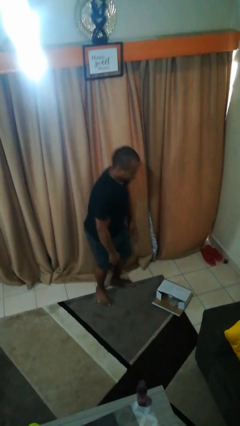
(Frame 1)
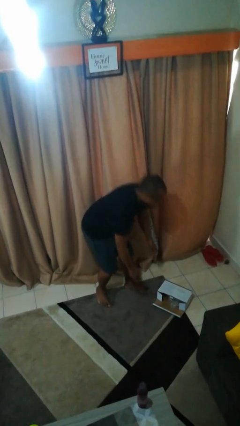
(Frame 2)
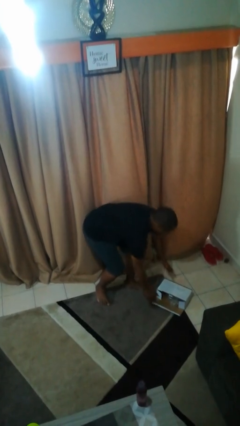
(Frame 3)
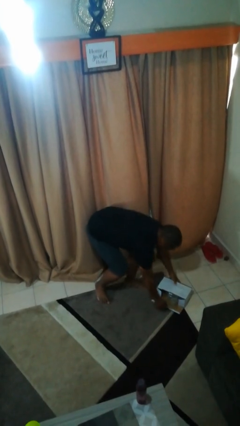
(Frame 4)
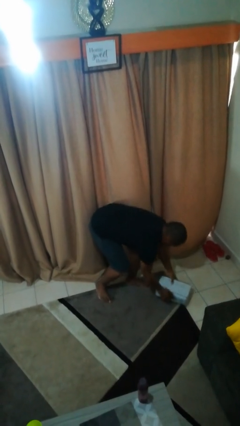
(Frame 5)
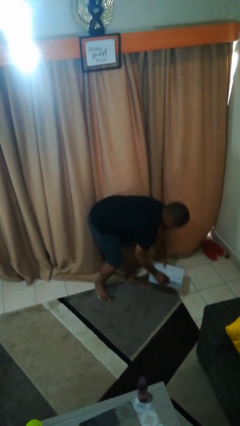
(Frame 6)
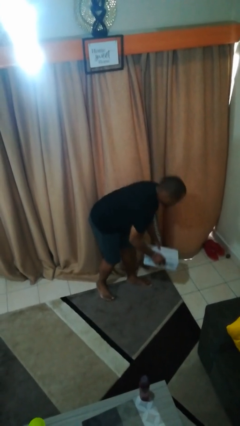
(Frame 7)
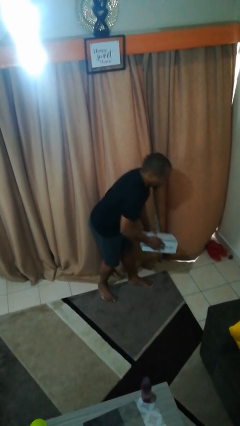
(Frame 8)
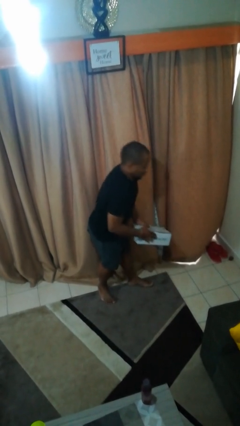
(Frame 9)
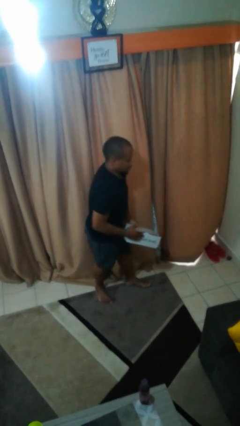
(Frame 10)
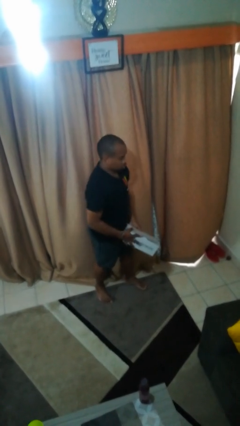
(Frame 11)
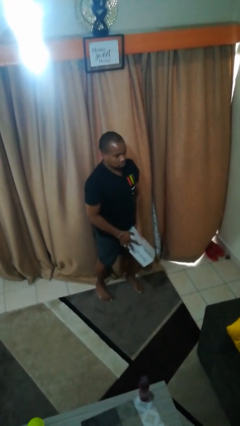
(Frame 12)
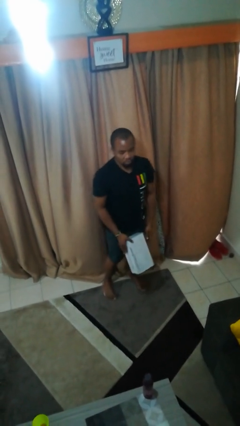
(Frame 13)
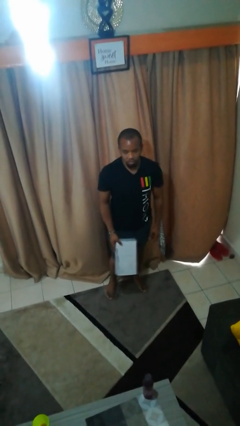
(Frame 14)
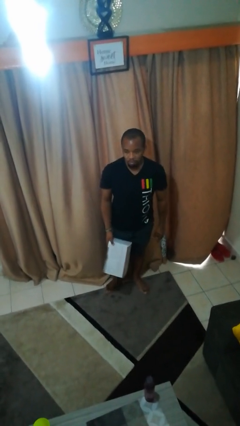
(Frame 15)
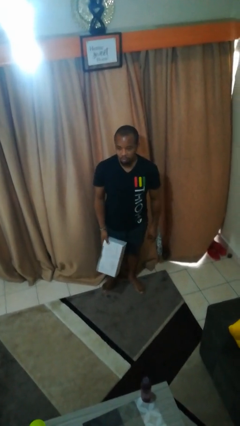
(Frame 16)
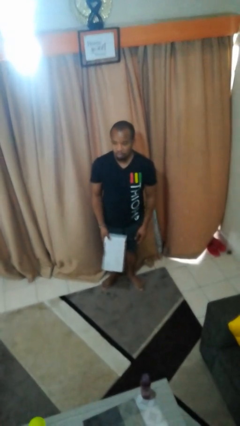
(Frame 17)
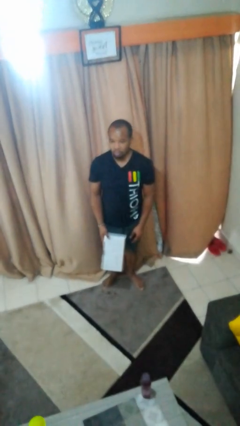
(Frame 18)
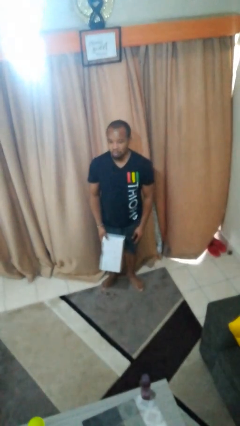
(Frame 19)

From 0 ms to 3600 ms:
person picks up object from floor

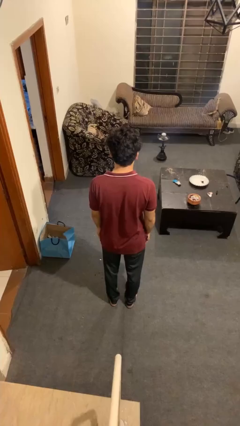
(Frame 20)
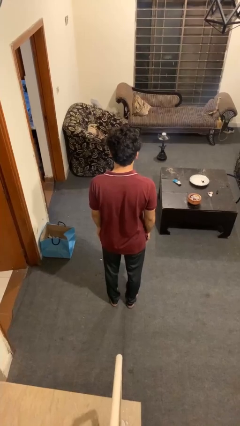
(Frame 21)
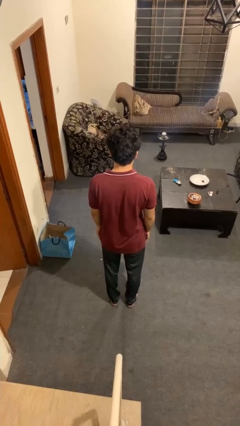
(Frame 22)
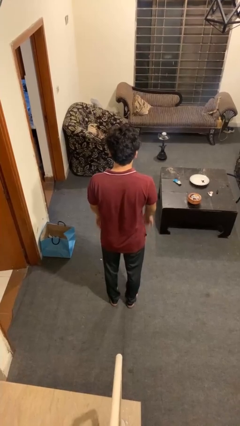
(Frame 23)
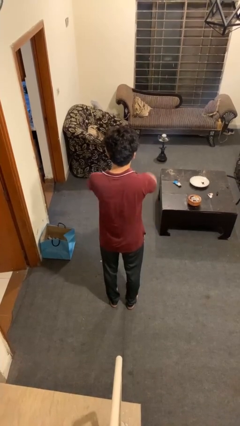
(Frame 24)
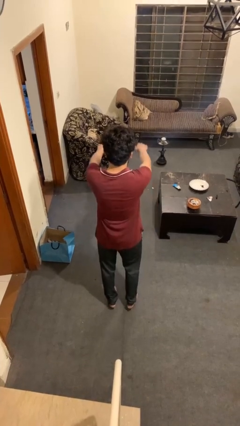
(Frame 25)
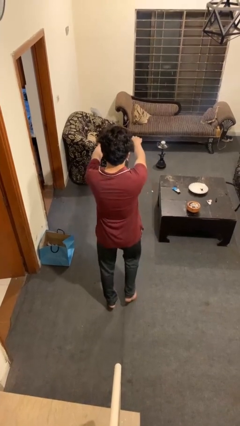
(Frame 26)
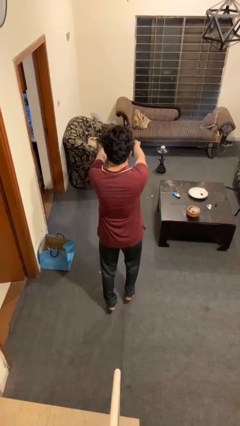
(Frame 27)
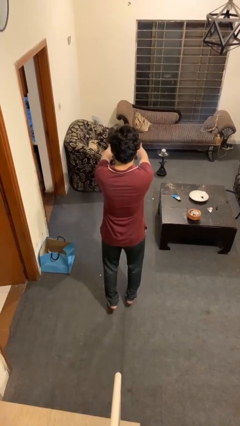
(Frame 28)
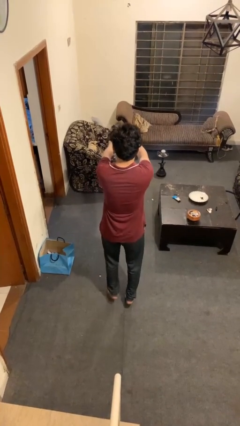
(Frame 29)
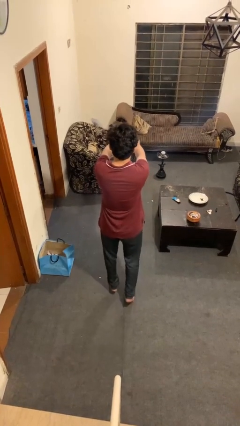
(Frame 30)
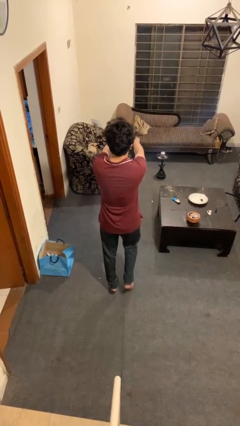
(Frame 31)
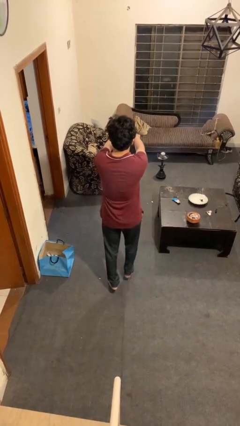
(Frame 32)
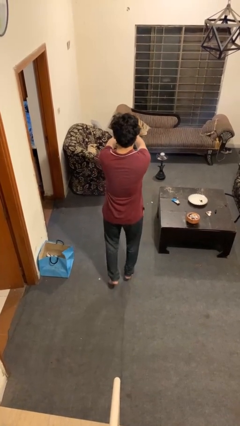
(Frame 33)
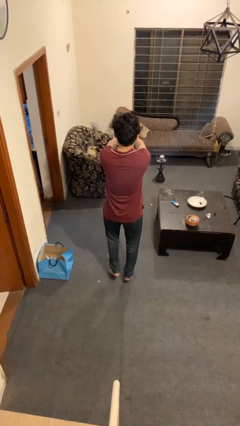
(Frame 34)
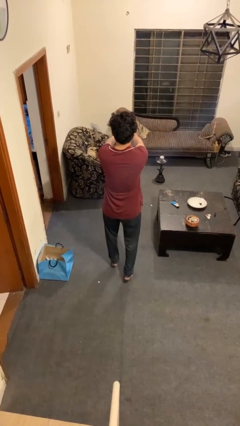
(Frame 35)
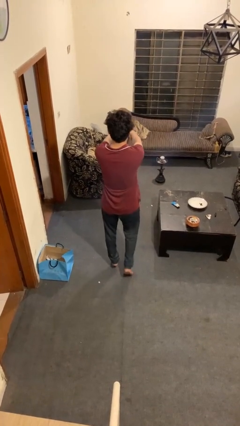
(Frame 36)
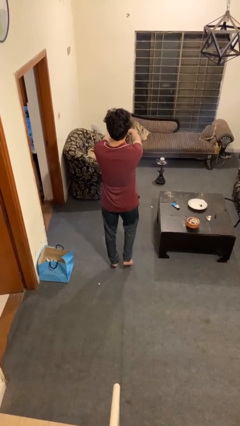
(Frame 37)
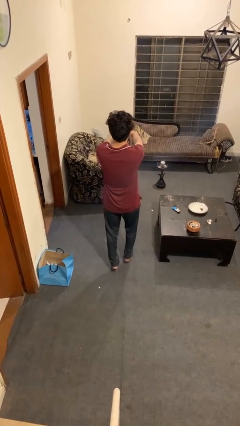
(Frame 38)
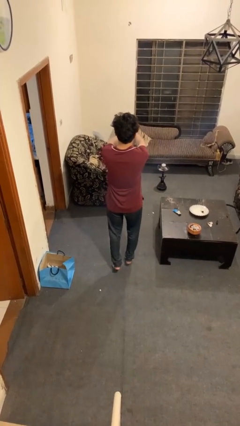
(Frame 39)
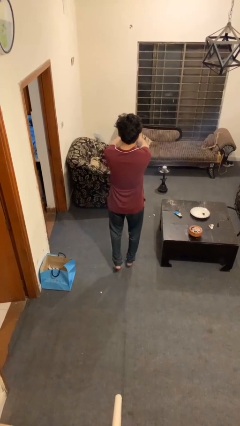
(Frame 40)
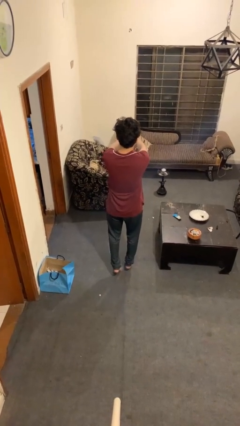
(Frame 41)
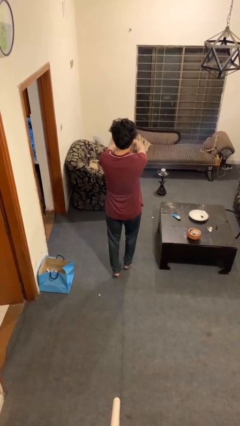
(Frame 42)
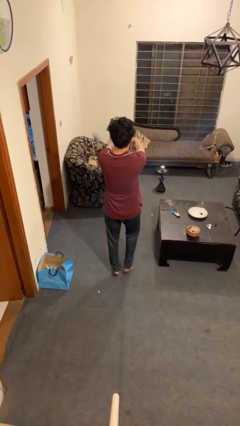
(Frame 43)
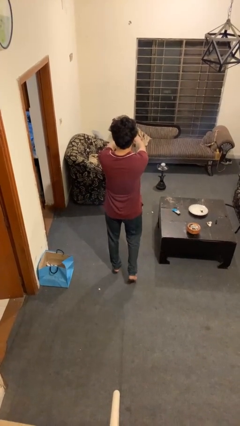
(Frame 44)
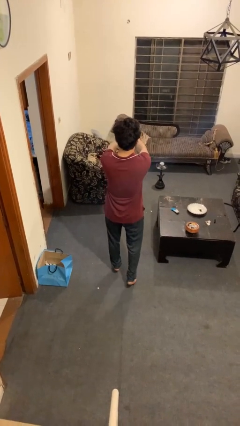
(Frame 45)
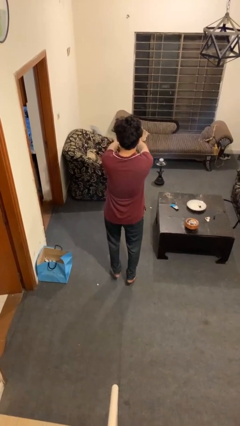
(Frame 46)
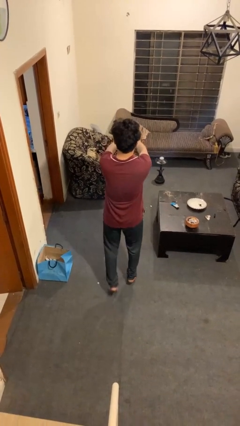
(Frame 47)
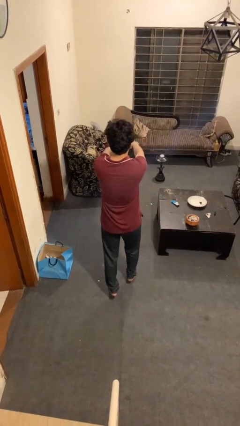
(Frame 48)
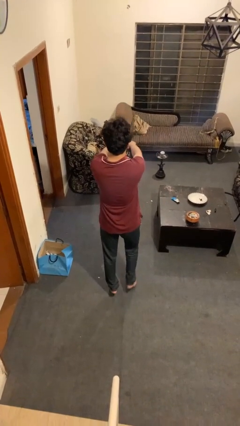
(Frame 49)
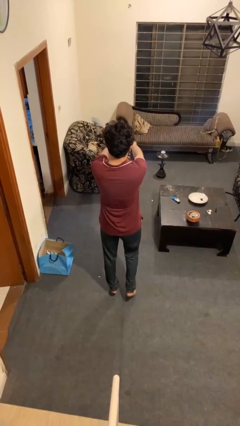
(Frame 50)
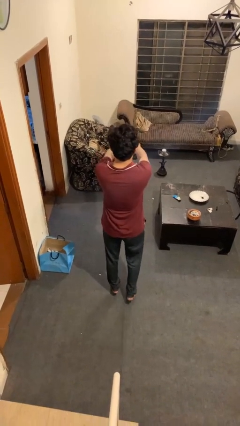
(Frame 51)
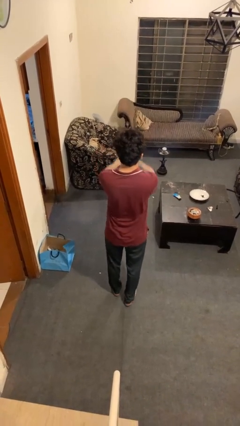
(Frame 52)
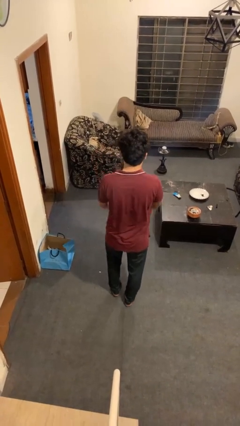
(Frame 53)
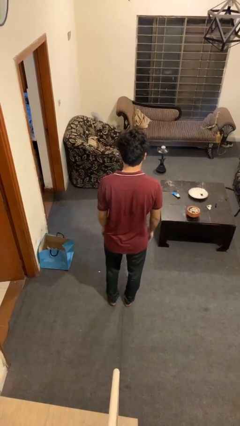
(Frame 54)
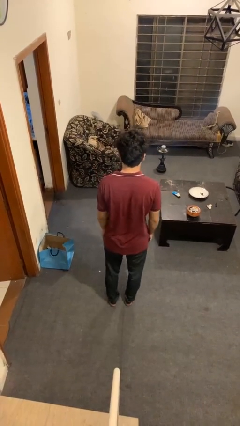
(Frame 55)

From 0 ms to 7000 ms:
person walks tiptoe

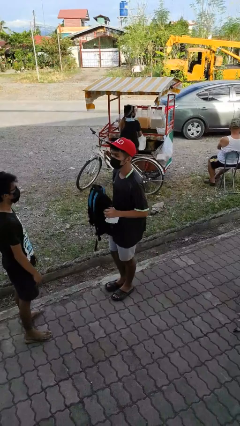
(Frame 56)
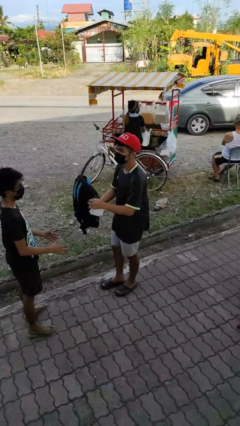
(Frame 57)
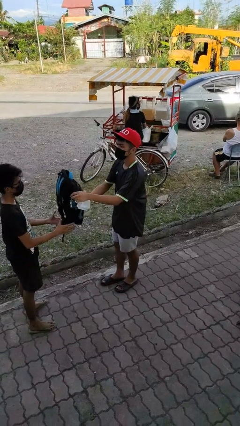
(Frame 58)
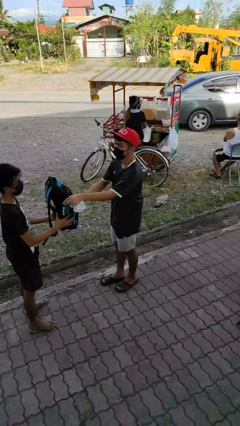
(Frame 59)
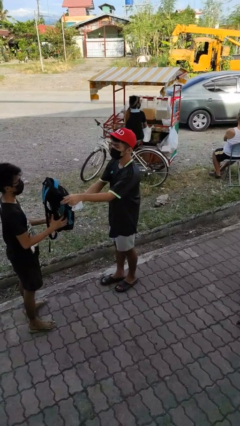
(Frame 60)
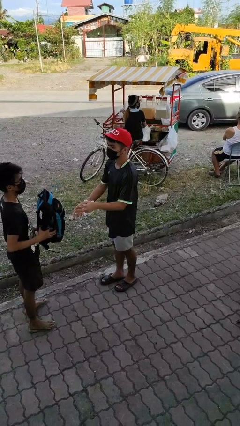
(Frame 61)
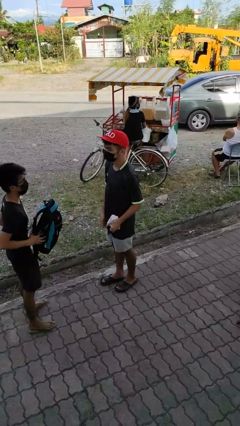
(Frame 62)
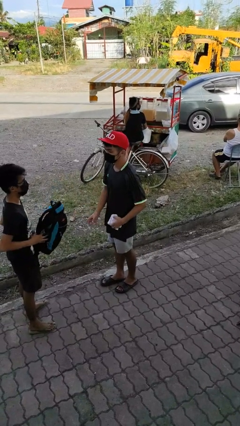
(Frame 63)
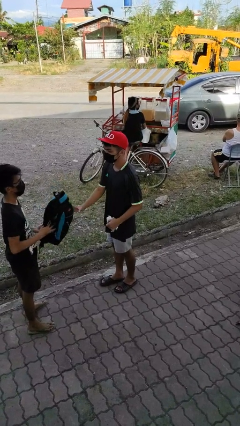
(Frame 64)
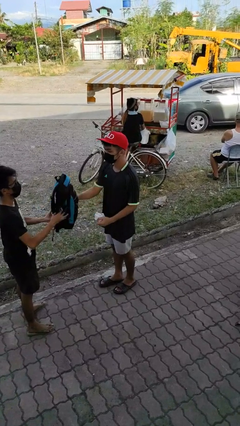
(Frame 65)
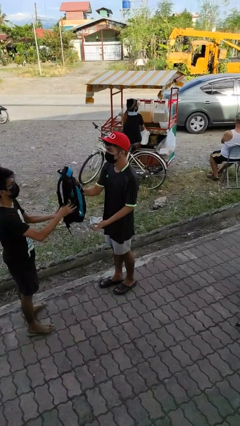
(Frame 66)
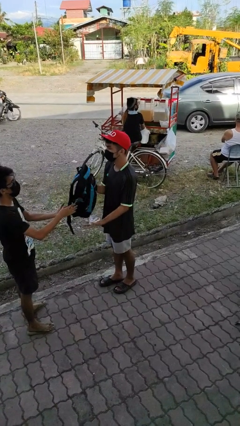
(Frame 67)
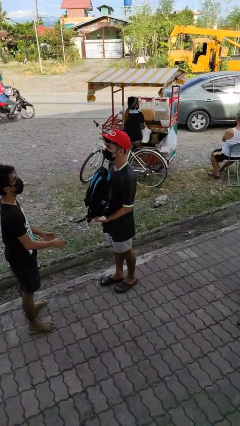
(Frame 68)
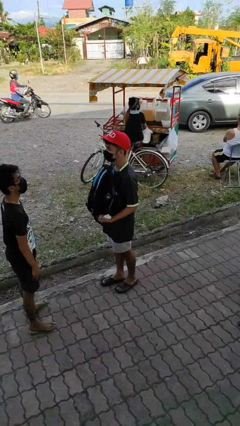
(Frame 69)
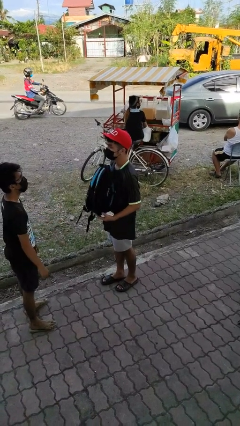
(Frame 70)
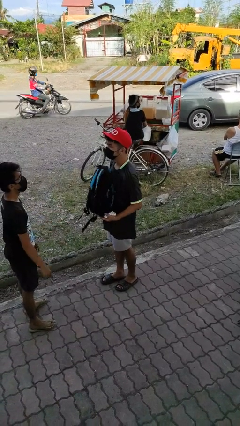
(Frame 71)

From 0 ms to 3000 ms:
person transfers object to person

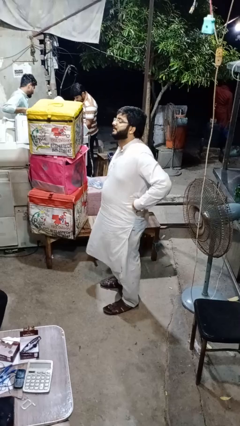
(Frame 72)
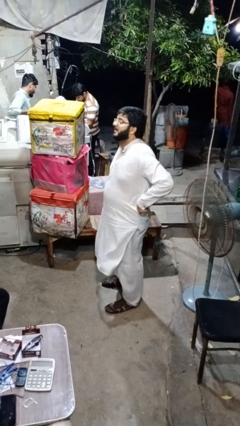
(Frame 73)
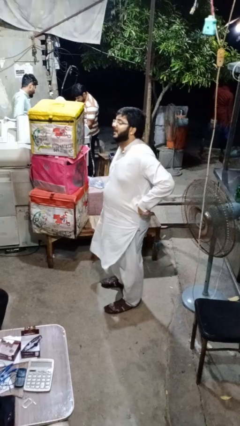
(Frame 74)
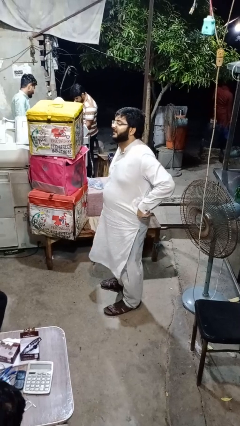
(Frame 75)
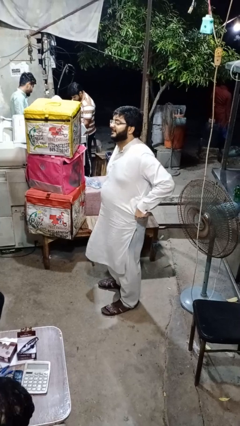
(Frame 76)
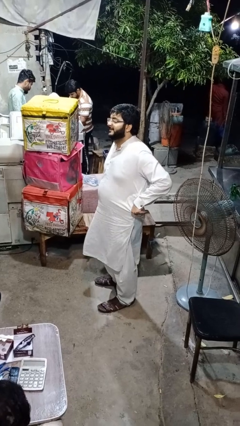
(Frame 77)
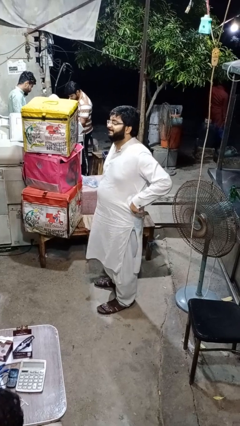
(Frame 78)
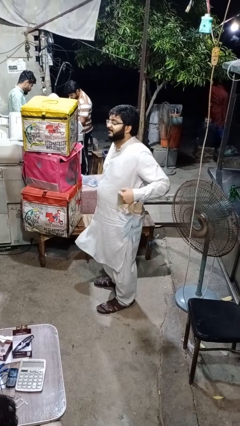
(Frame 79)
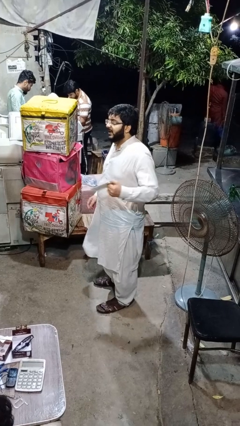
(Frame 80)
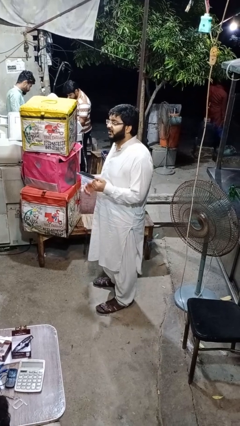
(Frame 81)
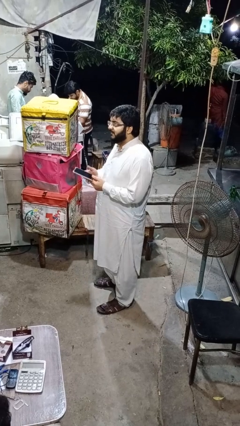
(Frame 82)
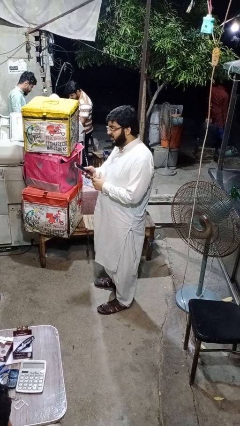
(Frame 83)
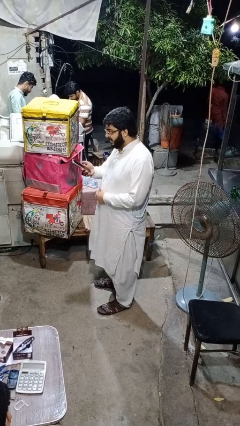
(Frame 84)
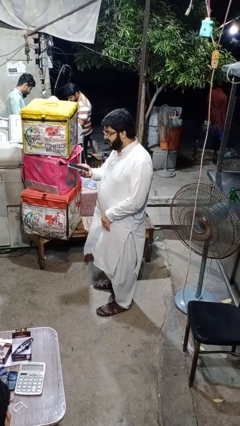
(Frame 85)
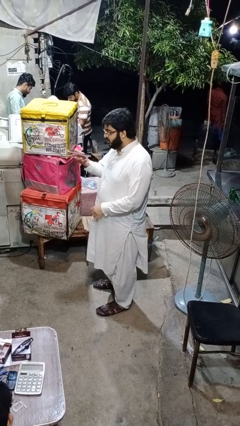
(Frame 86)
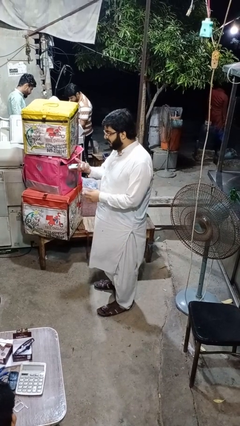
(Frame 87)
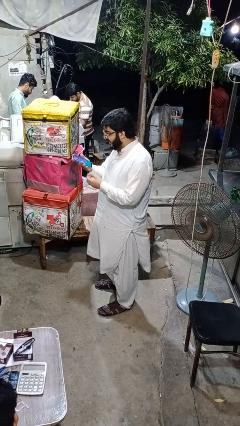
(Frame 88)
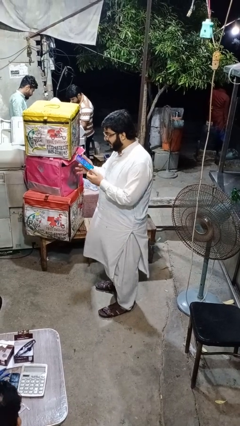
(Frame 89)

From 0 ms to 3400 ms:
person takes phone from pocket

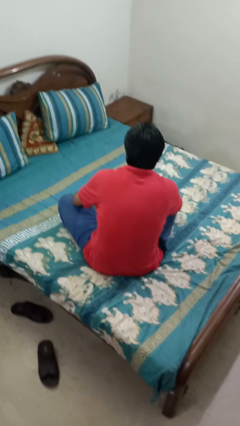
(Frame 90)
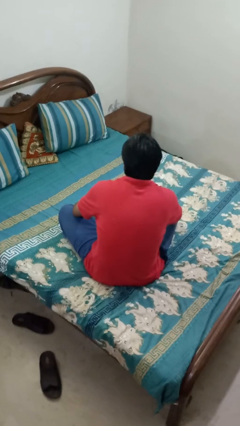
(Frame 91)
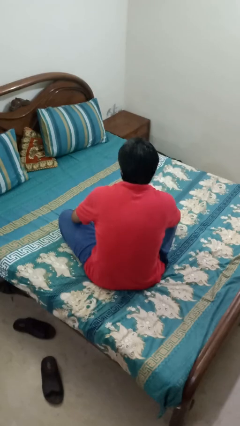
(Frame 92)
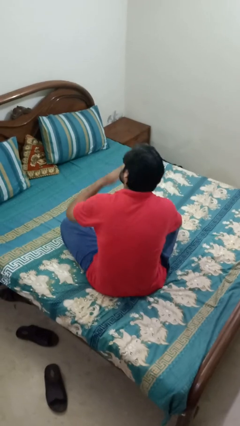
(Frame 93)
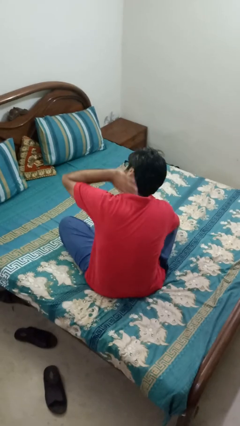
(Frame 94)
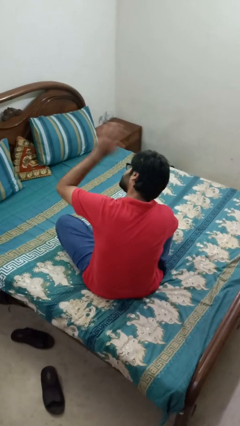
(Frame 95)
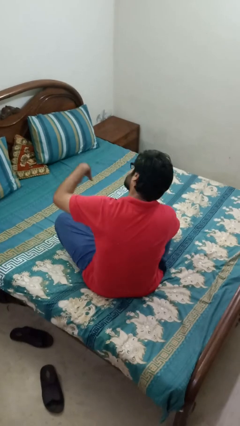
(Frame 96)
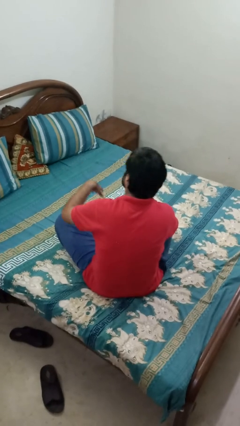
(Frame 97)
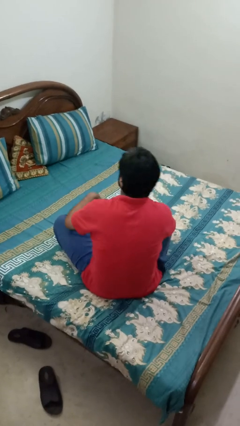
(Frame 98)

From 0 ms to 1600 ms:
person swats bug
